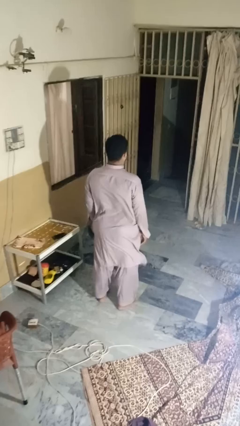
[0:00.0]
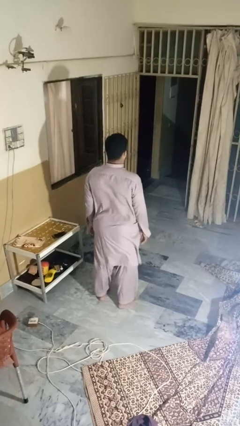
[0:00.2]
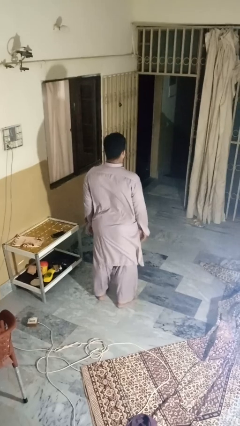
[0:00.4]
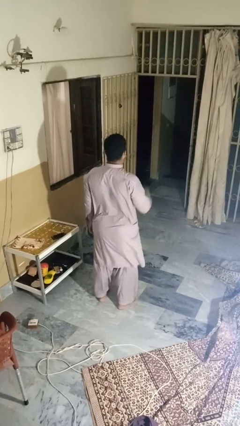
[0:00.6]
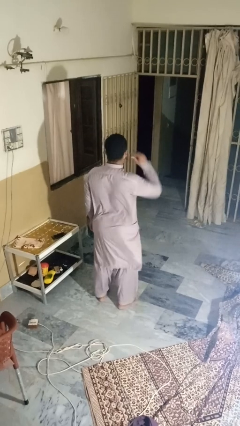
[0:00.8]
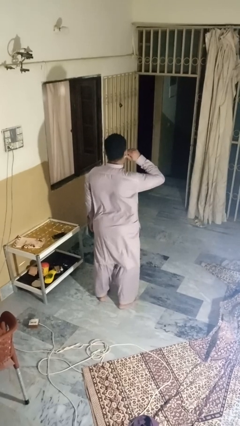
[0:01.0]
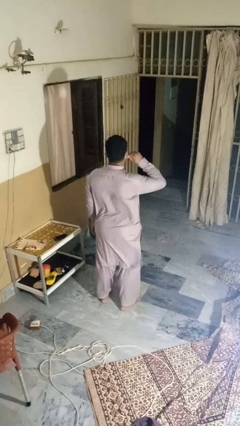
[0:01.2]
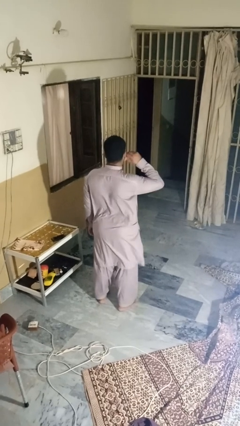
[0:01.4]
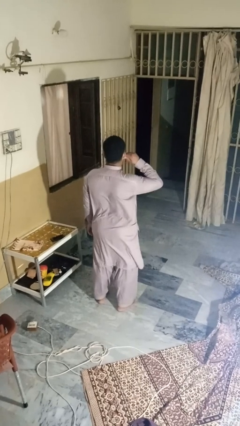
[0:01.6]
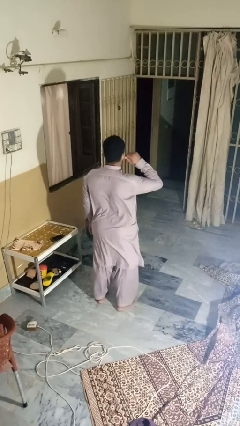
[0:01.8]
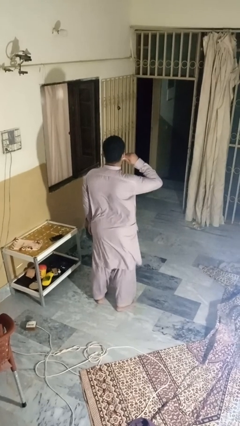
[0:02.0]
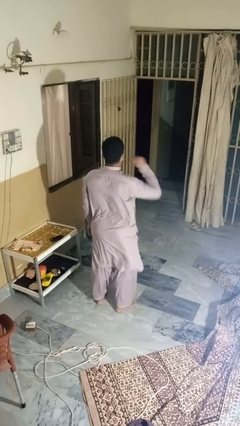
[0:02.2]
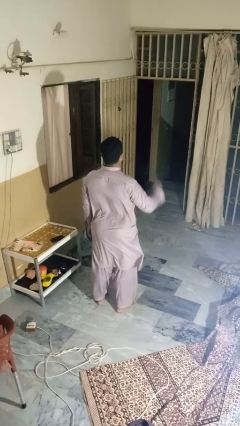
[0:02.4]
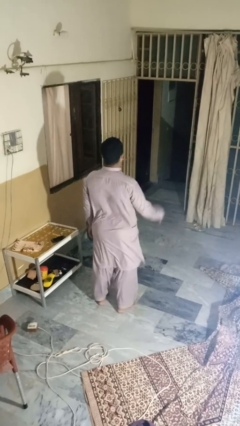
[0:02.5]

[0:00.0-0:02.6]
person touches earlobe

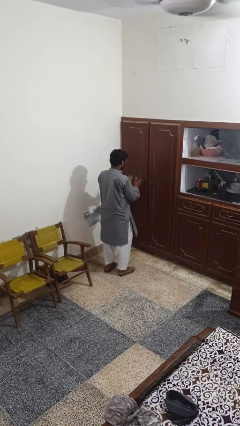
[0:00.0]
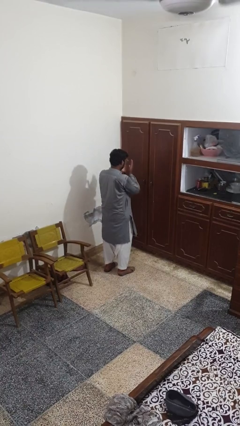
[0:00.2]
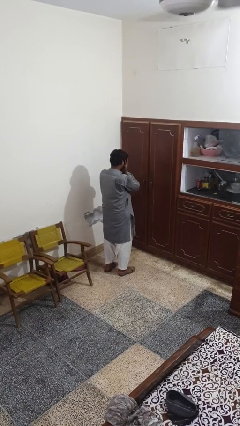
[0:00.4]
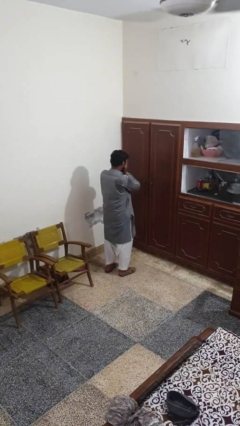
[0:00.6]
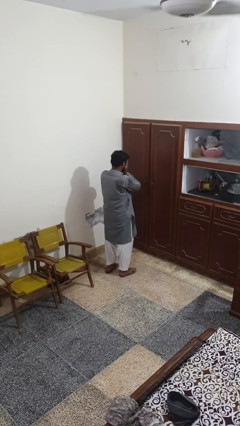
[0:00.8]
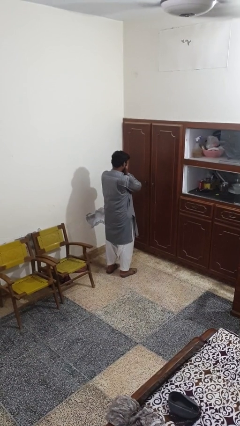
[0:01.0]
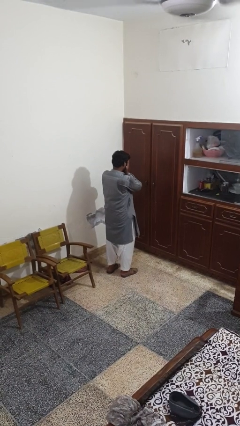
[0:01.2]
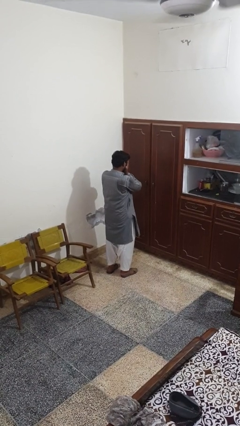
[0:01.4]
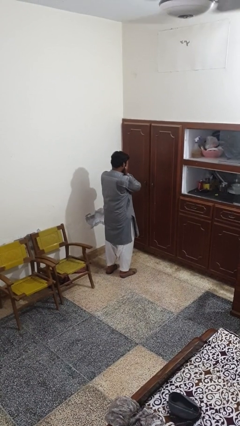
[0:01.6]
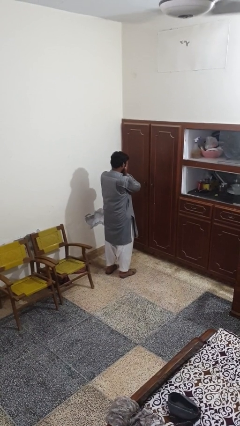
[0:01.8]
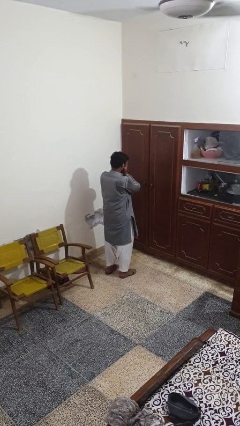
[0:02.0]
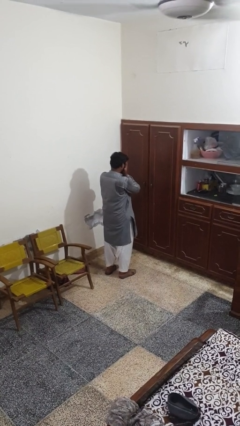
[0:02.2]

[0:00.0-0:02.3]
person covers face with hands

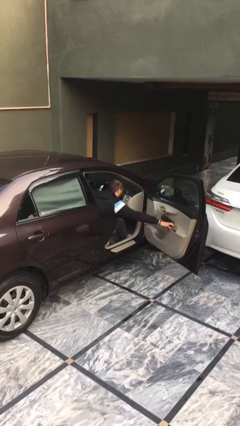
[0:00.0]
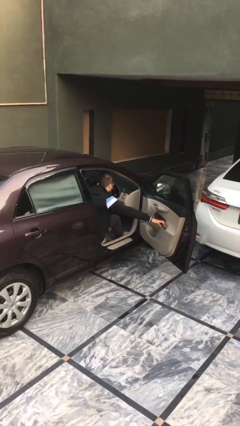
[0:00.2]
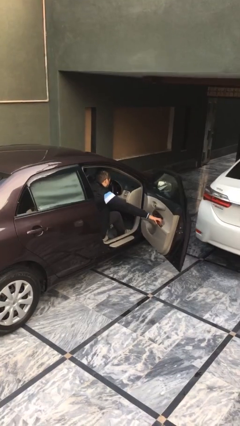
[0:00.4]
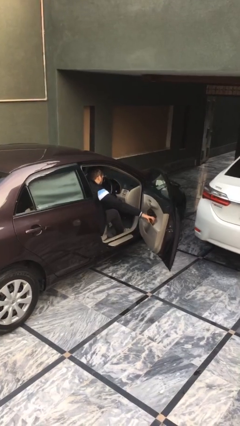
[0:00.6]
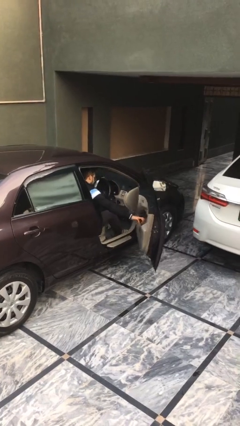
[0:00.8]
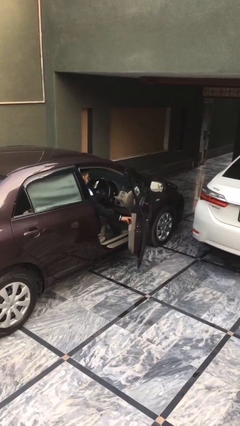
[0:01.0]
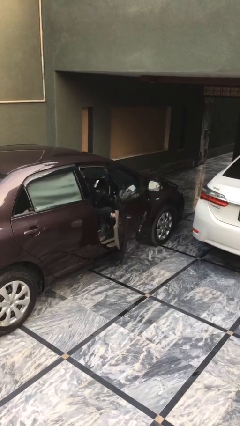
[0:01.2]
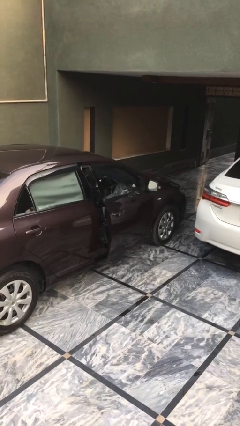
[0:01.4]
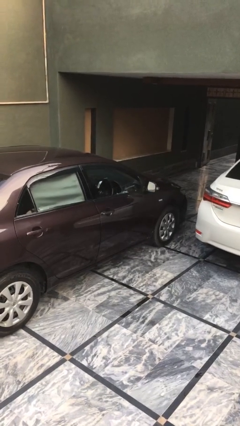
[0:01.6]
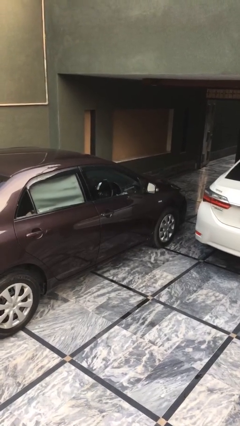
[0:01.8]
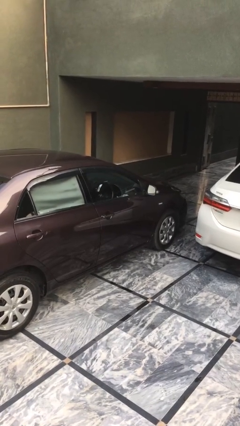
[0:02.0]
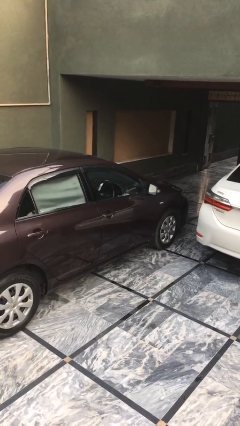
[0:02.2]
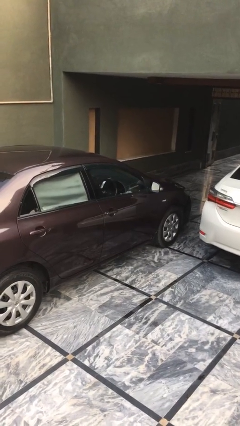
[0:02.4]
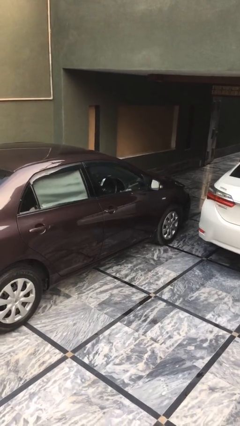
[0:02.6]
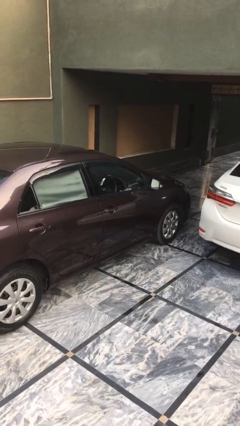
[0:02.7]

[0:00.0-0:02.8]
person closes car door

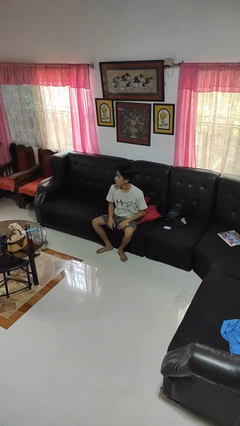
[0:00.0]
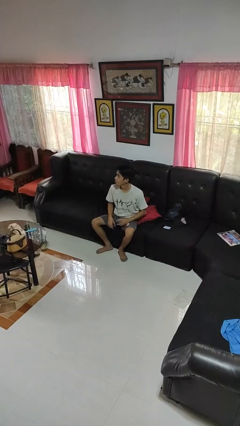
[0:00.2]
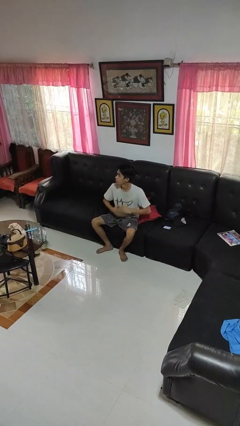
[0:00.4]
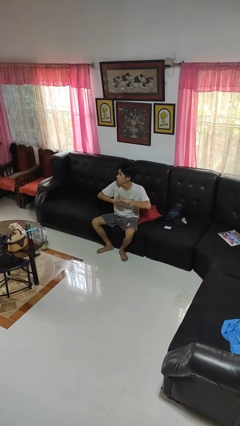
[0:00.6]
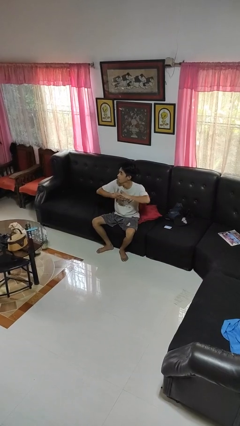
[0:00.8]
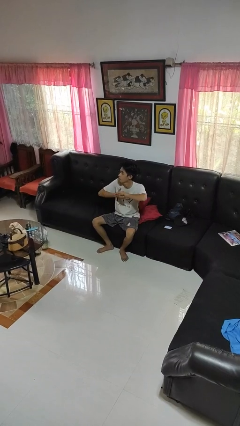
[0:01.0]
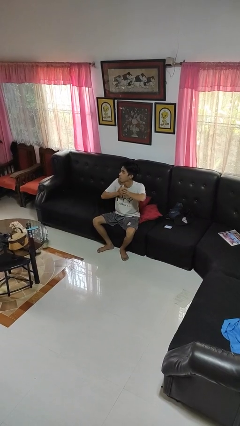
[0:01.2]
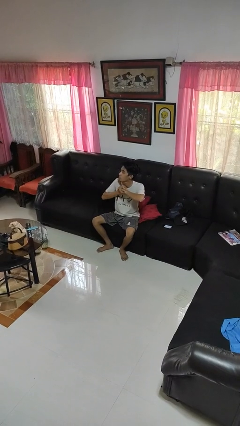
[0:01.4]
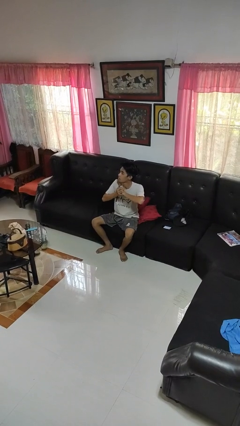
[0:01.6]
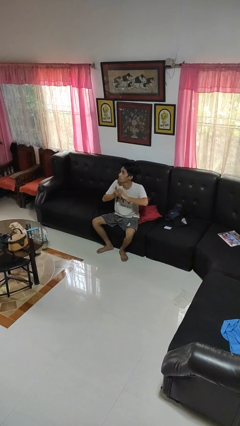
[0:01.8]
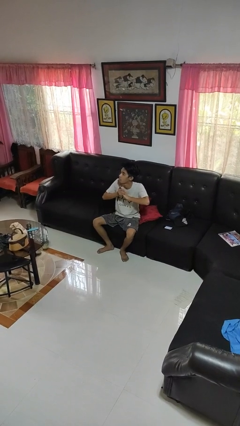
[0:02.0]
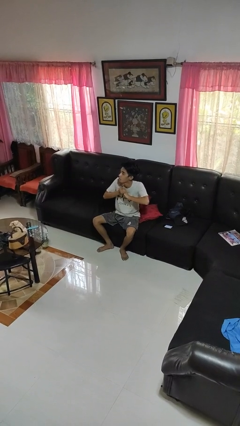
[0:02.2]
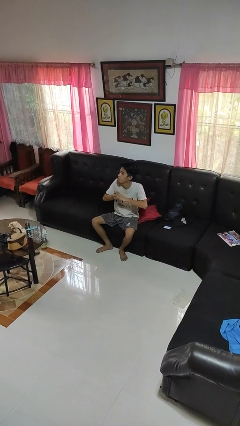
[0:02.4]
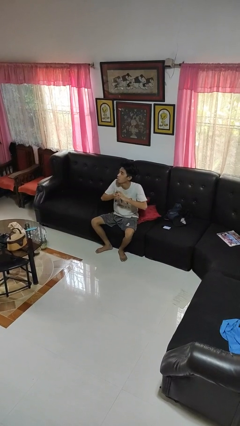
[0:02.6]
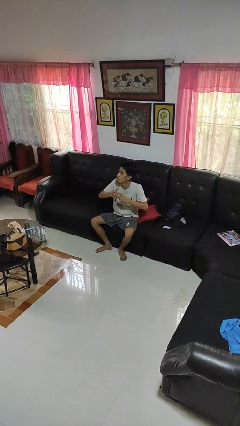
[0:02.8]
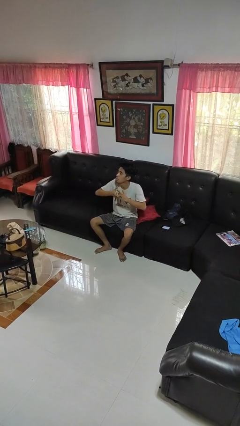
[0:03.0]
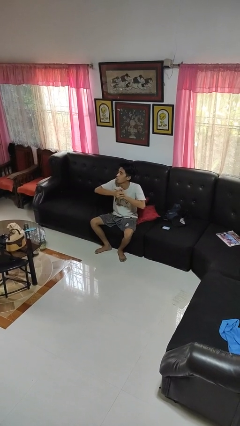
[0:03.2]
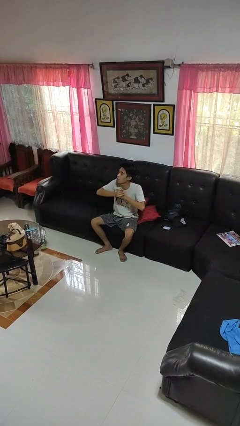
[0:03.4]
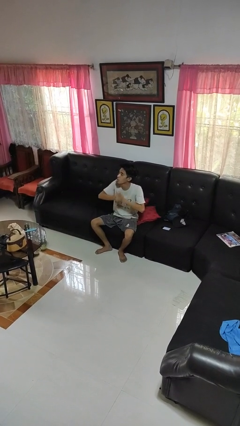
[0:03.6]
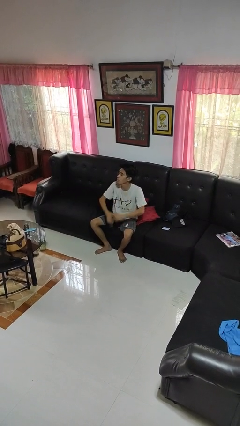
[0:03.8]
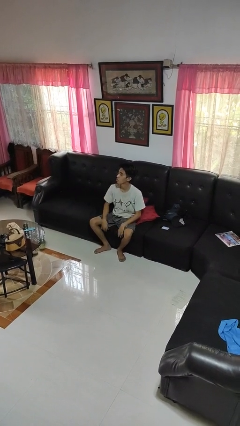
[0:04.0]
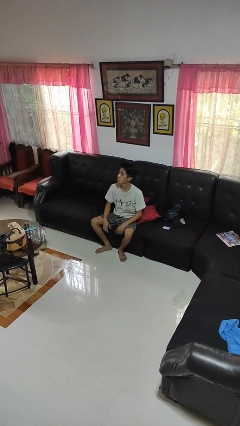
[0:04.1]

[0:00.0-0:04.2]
person cracks knuckles

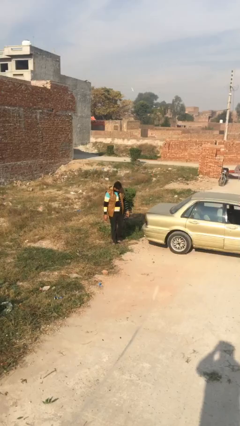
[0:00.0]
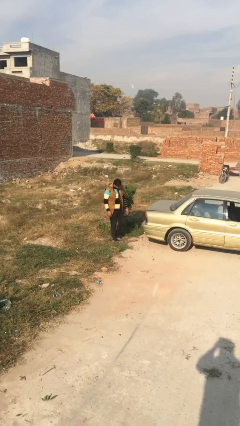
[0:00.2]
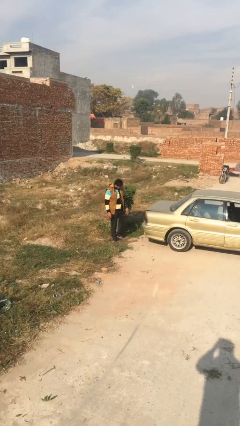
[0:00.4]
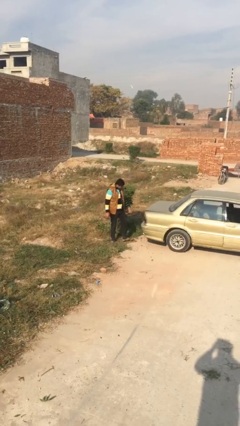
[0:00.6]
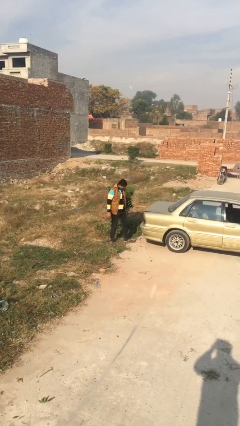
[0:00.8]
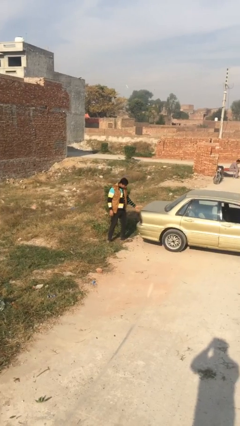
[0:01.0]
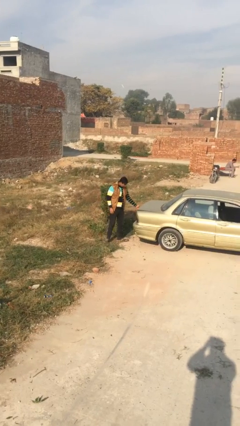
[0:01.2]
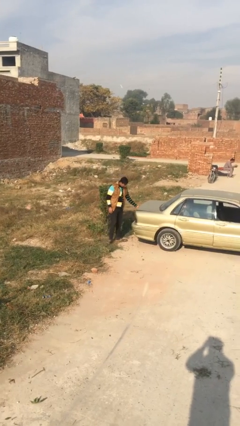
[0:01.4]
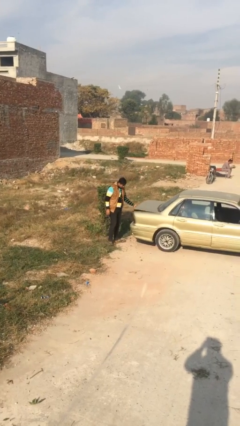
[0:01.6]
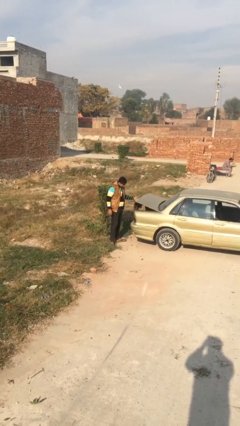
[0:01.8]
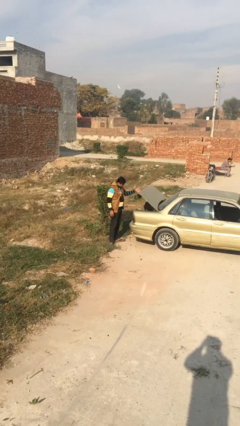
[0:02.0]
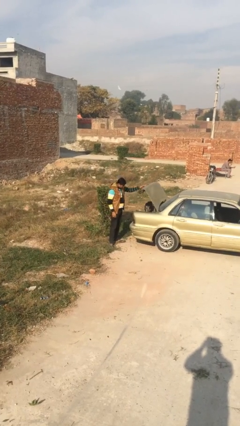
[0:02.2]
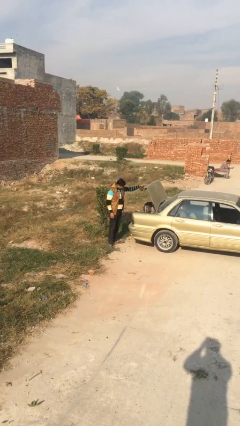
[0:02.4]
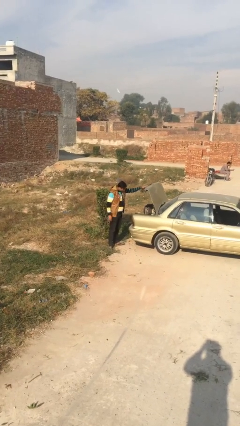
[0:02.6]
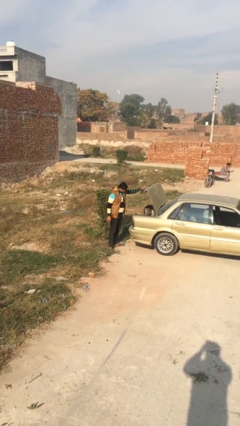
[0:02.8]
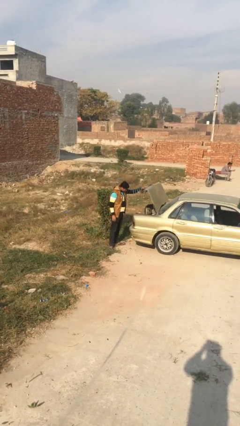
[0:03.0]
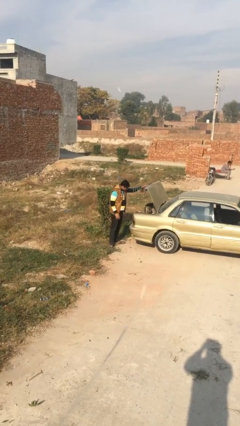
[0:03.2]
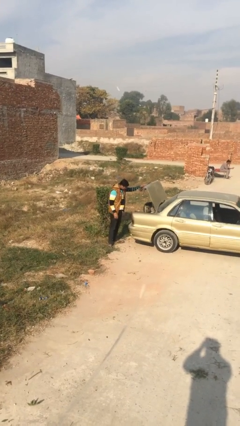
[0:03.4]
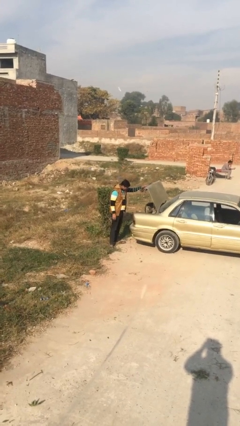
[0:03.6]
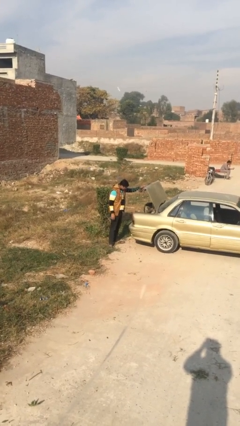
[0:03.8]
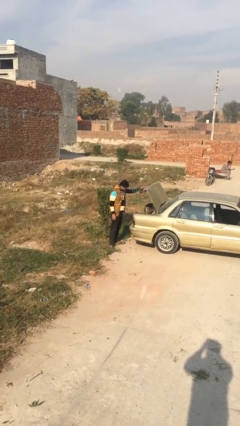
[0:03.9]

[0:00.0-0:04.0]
person opens car trunk

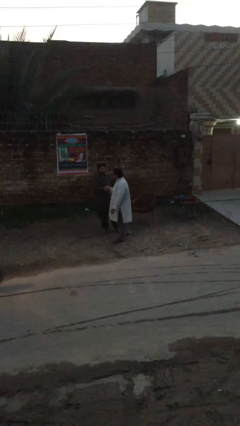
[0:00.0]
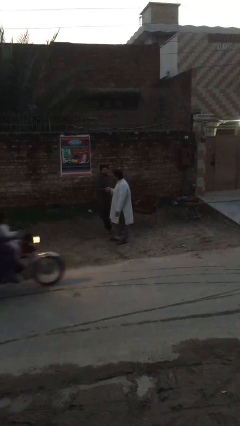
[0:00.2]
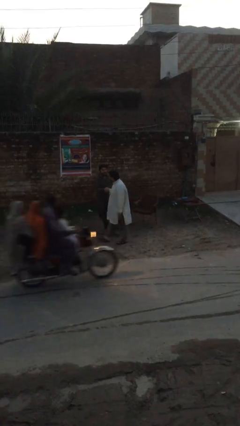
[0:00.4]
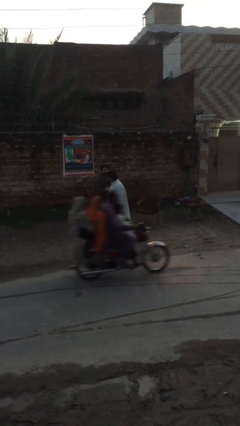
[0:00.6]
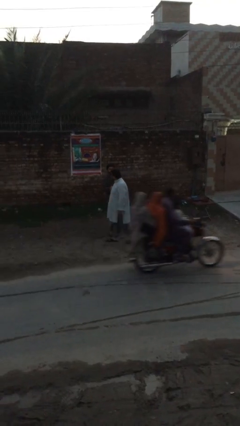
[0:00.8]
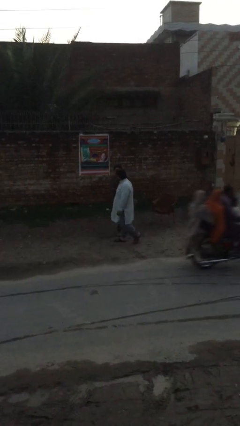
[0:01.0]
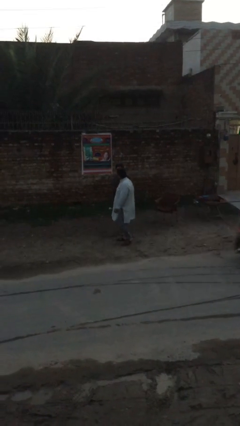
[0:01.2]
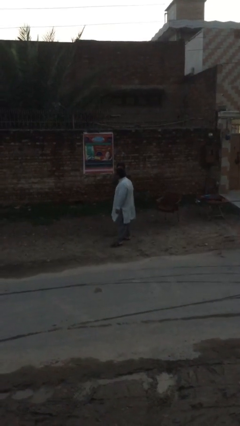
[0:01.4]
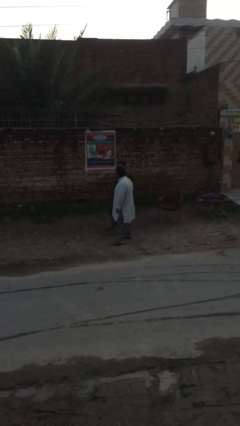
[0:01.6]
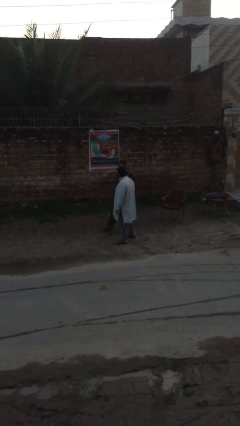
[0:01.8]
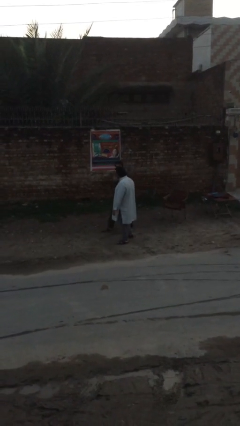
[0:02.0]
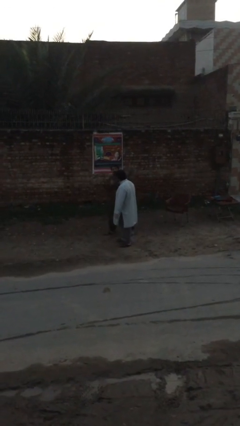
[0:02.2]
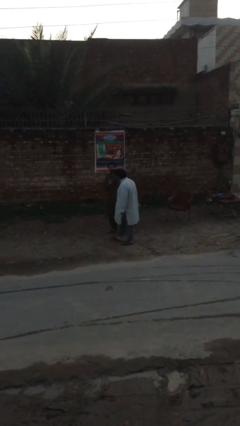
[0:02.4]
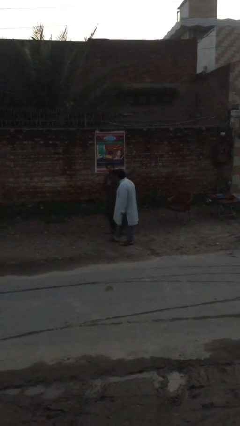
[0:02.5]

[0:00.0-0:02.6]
person shakes hand
